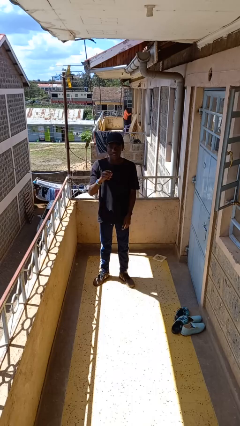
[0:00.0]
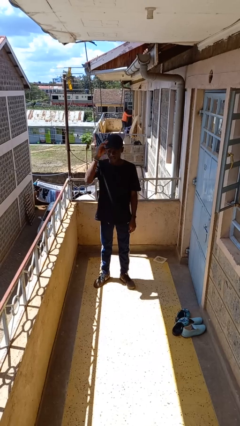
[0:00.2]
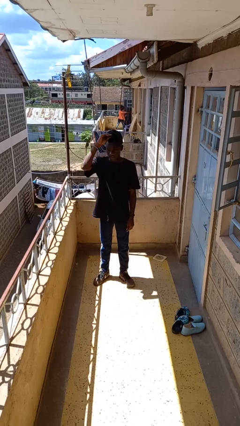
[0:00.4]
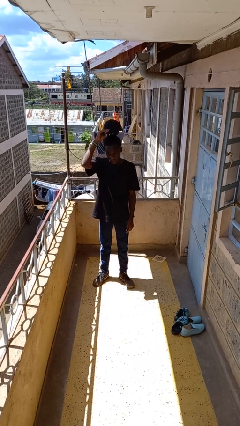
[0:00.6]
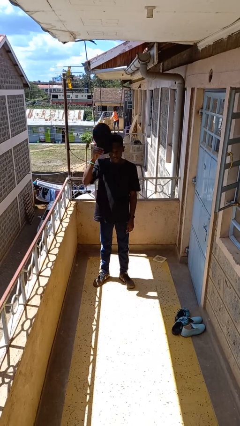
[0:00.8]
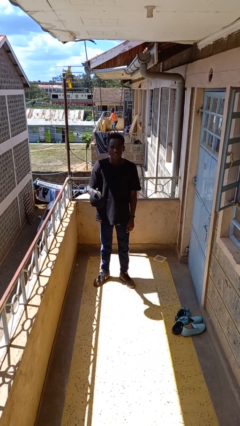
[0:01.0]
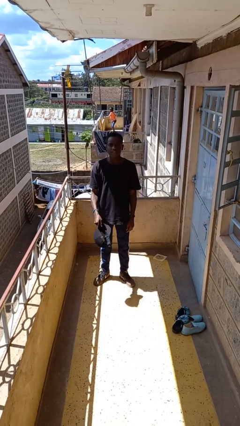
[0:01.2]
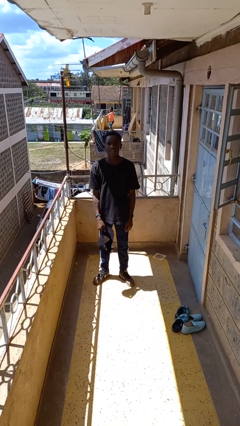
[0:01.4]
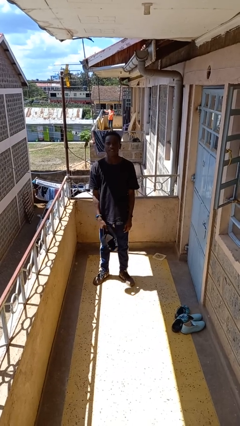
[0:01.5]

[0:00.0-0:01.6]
person takes off hat

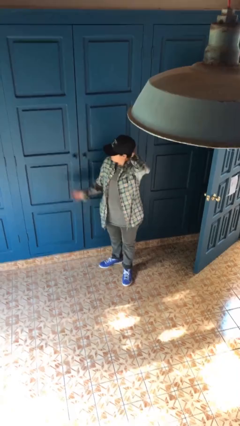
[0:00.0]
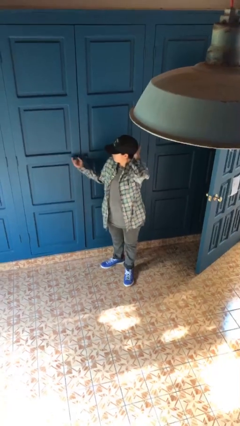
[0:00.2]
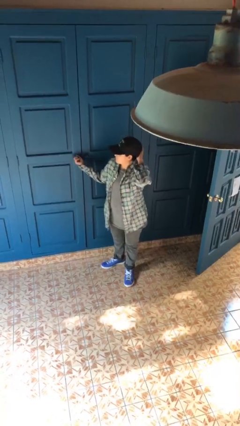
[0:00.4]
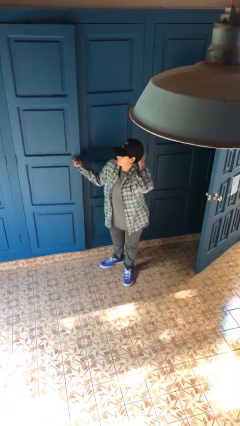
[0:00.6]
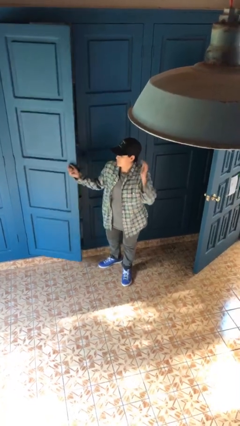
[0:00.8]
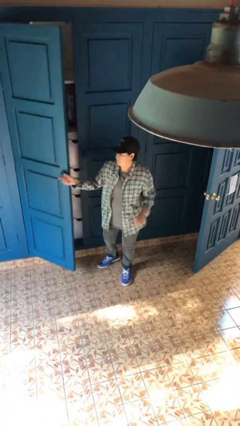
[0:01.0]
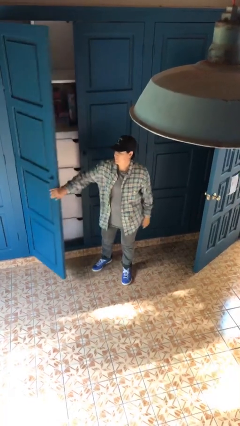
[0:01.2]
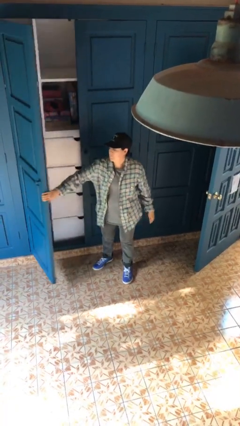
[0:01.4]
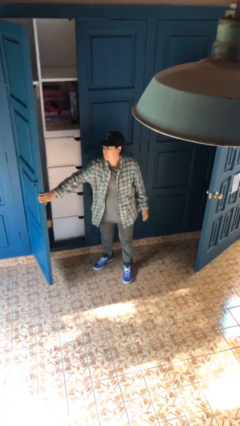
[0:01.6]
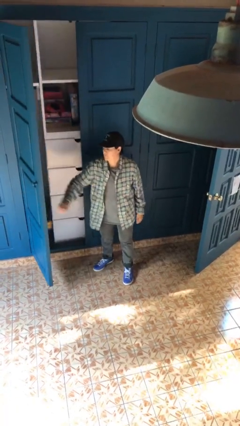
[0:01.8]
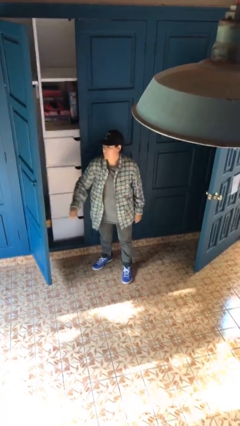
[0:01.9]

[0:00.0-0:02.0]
person opens closet door

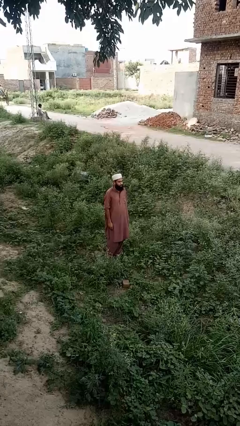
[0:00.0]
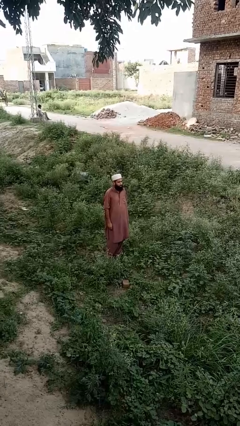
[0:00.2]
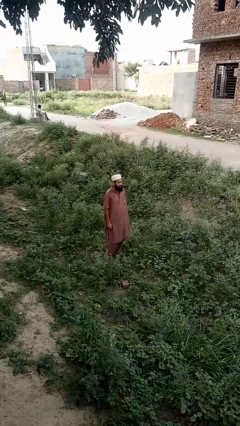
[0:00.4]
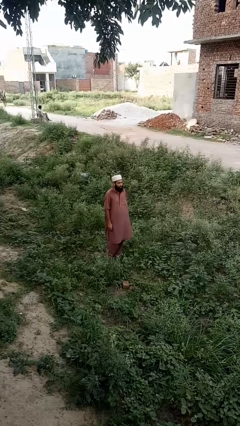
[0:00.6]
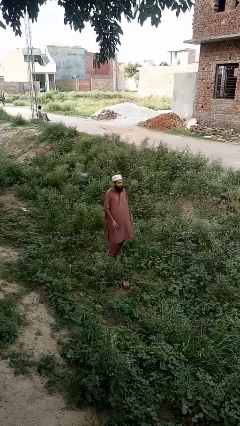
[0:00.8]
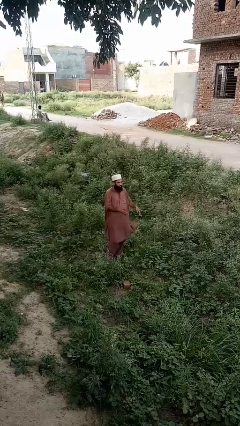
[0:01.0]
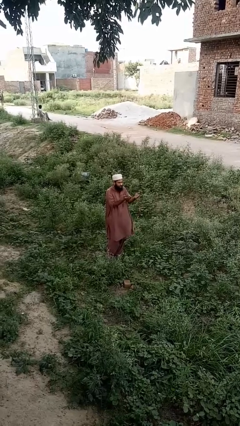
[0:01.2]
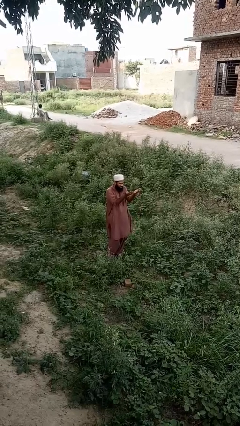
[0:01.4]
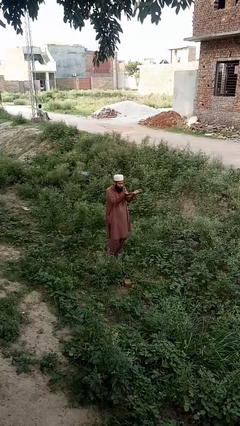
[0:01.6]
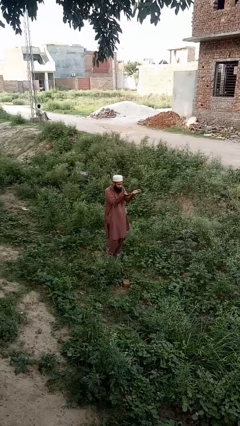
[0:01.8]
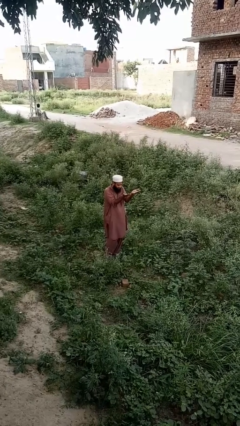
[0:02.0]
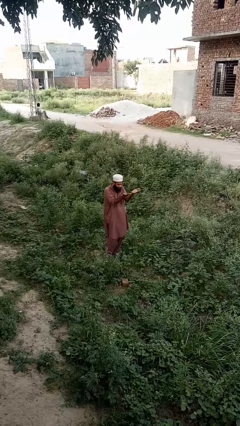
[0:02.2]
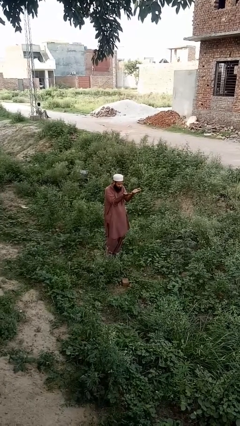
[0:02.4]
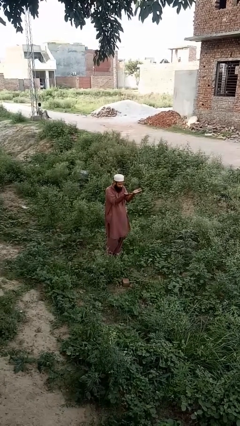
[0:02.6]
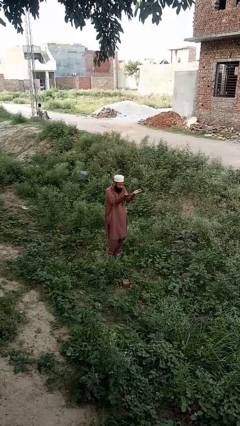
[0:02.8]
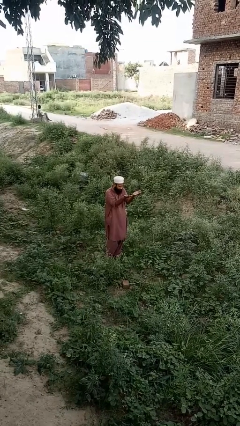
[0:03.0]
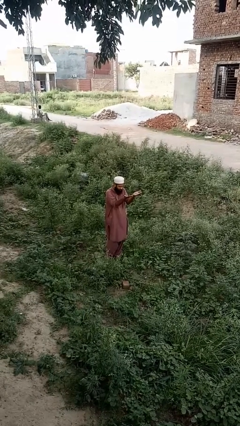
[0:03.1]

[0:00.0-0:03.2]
person prays

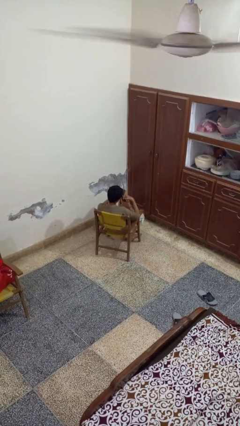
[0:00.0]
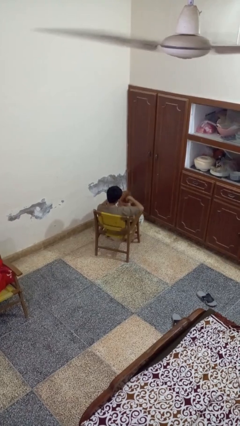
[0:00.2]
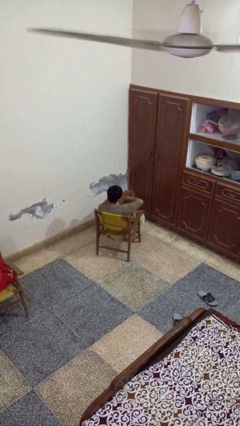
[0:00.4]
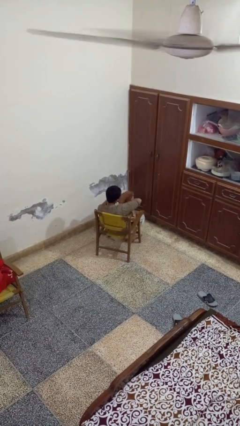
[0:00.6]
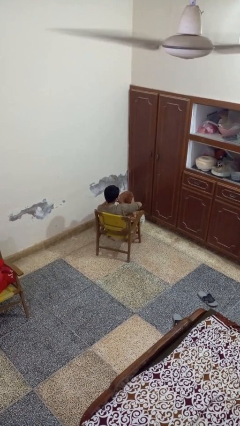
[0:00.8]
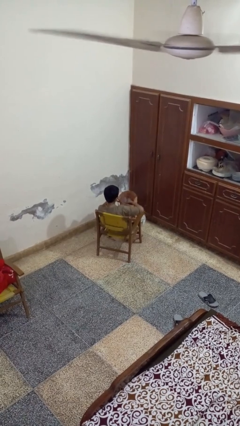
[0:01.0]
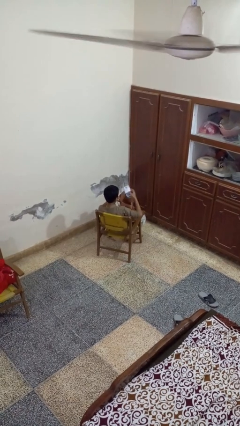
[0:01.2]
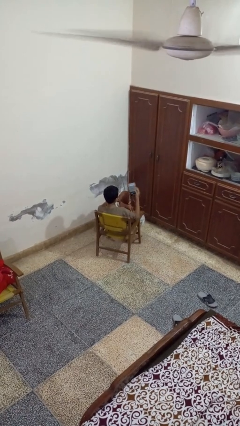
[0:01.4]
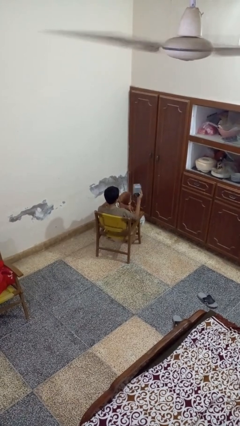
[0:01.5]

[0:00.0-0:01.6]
person takes object from bag

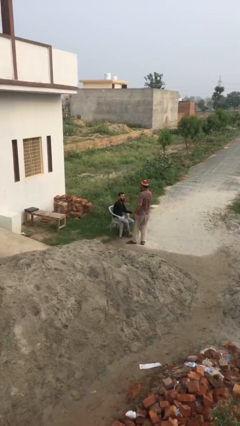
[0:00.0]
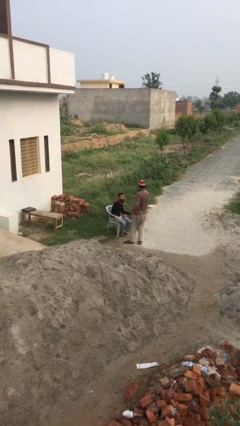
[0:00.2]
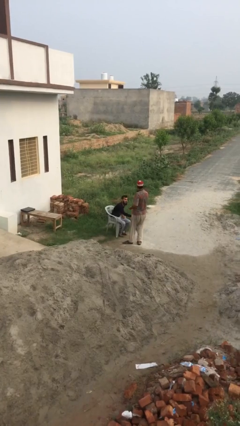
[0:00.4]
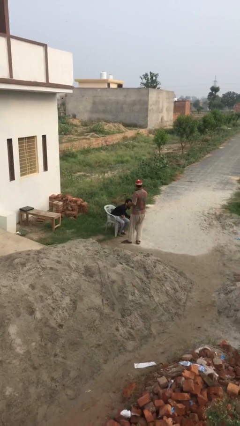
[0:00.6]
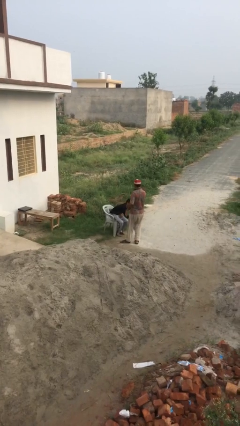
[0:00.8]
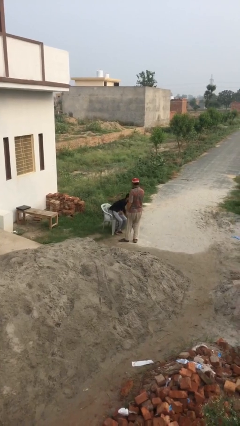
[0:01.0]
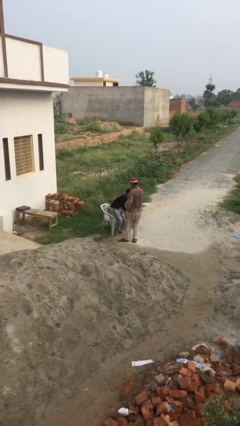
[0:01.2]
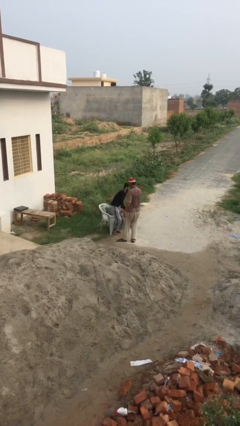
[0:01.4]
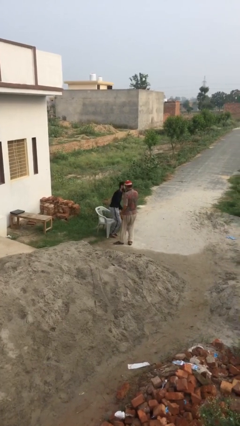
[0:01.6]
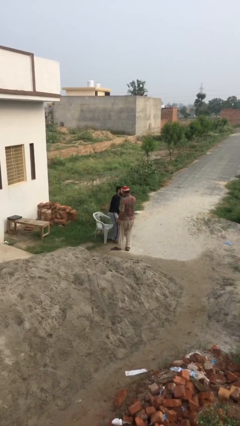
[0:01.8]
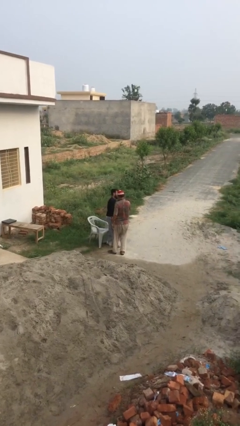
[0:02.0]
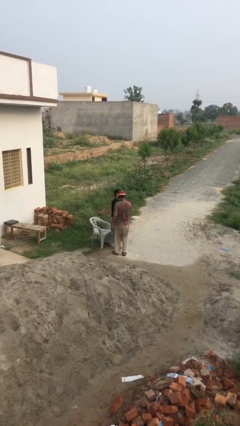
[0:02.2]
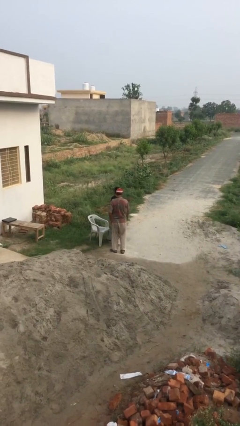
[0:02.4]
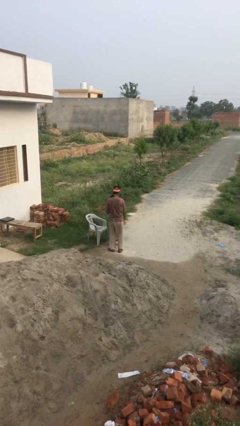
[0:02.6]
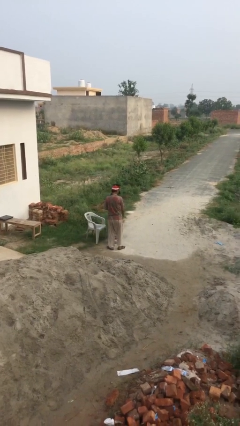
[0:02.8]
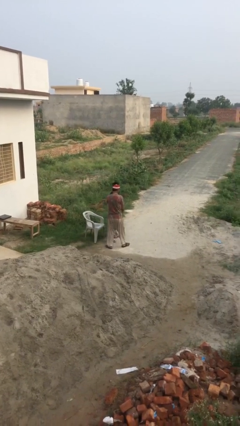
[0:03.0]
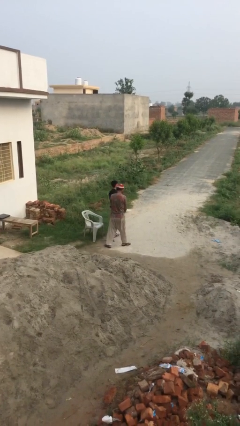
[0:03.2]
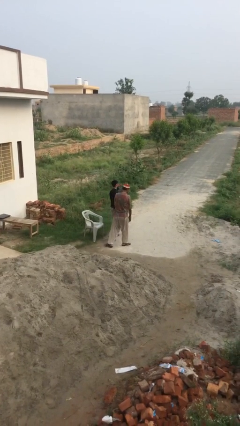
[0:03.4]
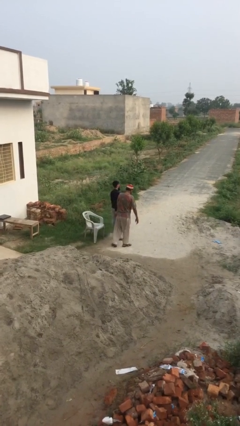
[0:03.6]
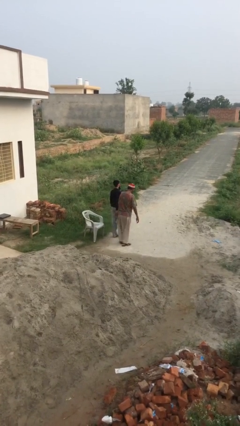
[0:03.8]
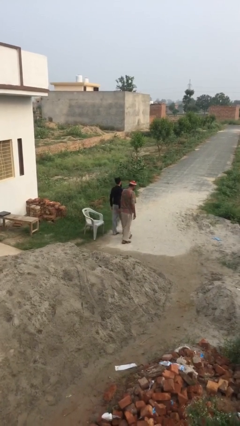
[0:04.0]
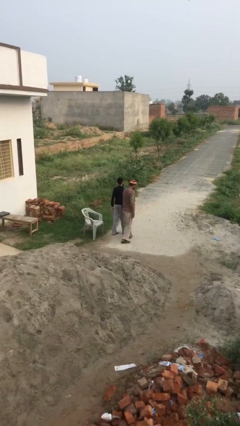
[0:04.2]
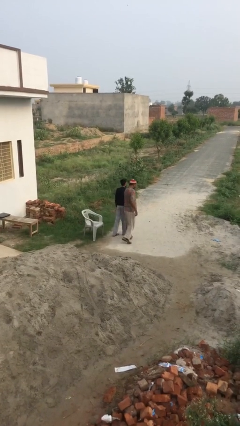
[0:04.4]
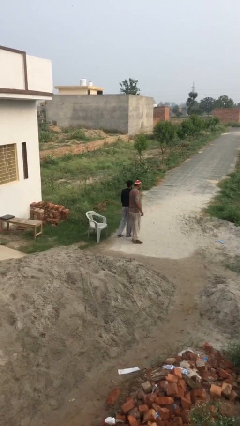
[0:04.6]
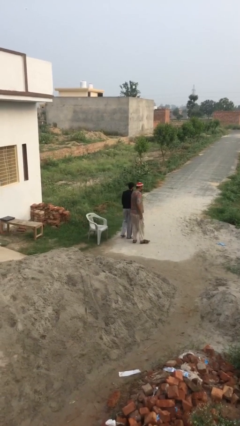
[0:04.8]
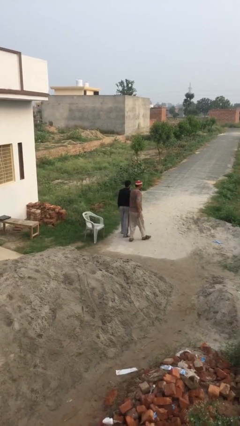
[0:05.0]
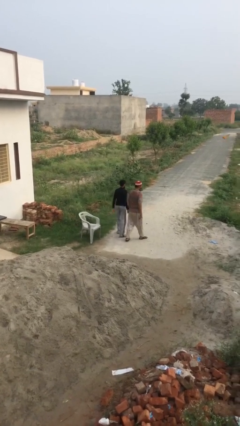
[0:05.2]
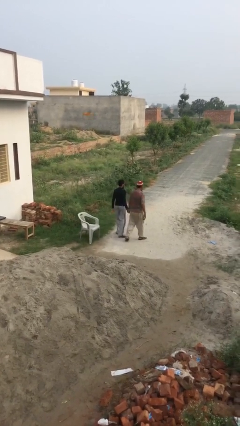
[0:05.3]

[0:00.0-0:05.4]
person talks to person

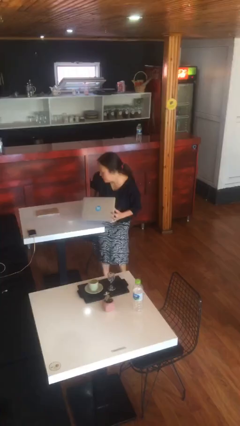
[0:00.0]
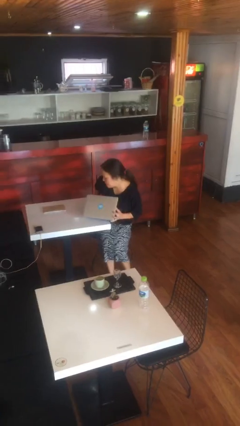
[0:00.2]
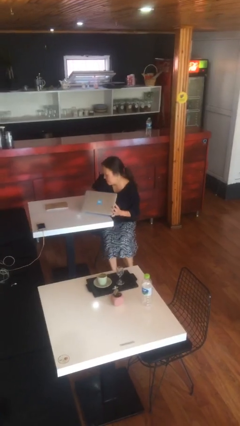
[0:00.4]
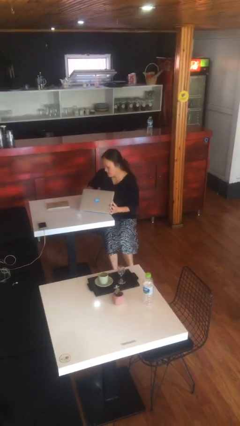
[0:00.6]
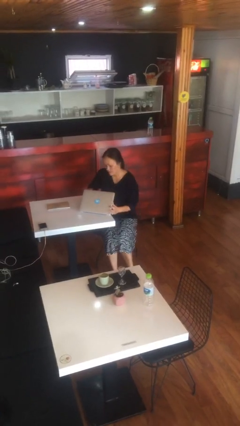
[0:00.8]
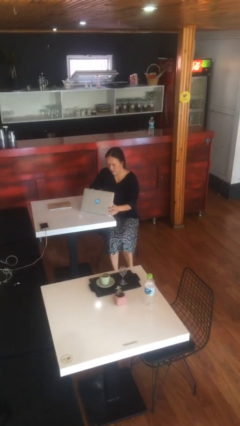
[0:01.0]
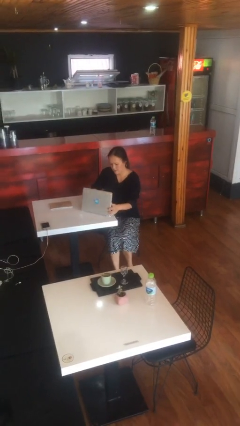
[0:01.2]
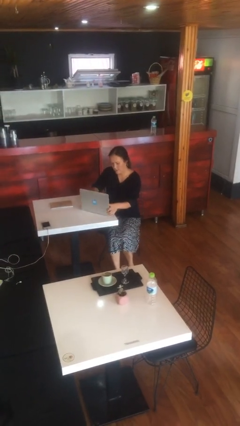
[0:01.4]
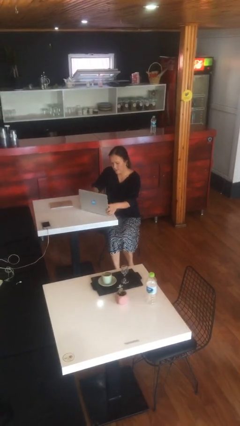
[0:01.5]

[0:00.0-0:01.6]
person sits down

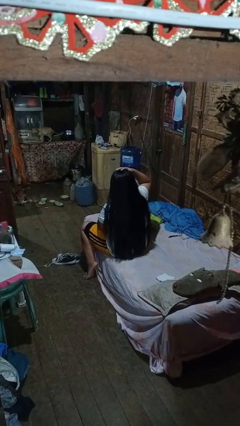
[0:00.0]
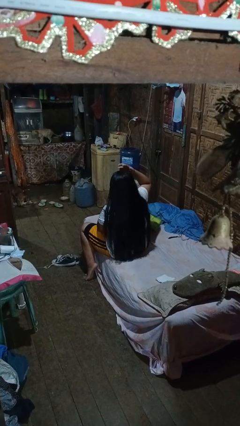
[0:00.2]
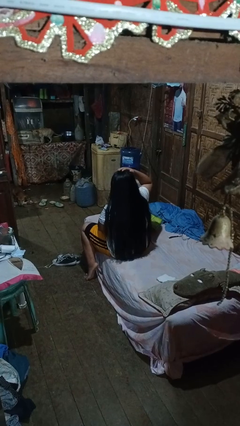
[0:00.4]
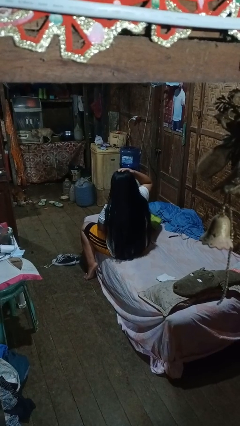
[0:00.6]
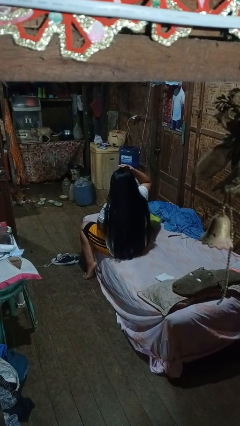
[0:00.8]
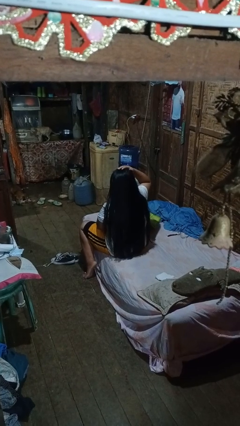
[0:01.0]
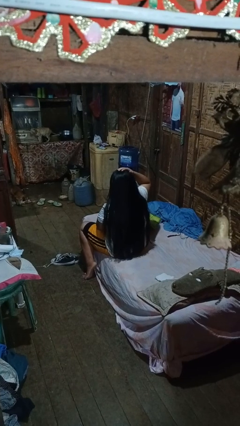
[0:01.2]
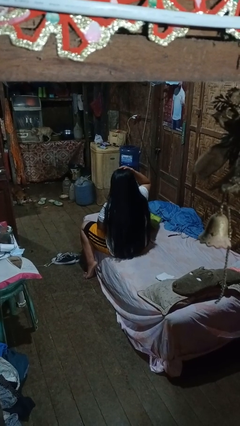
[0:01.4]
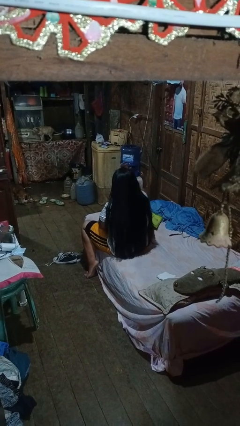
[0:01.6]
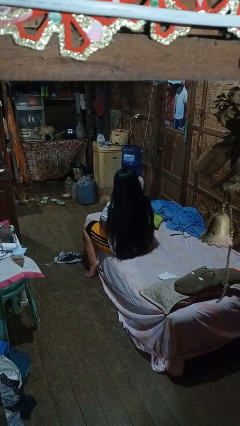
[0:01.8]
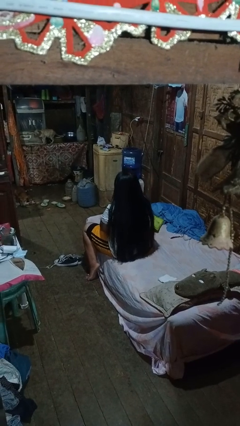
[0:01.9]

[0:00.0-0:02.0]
person pats head
